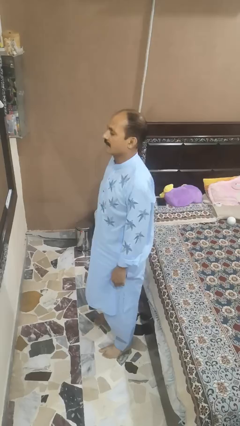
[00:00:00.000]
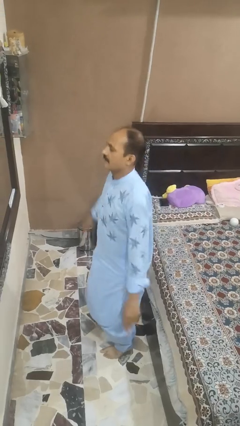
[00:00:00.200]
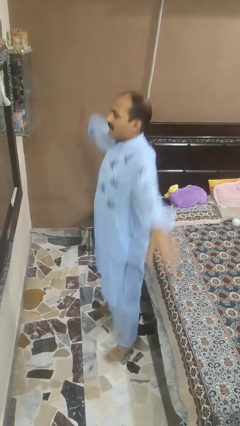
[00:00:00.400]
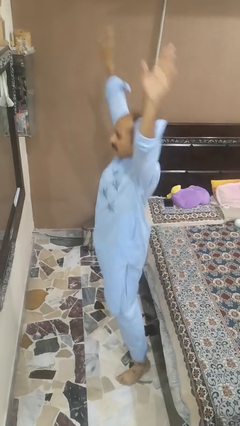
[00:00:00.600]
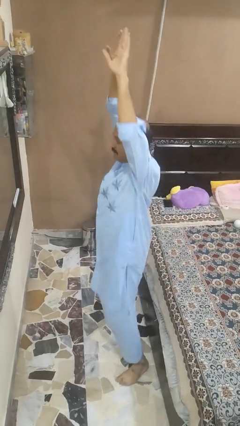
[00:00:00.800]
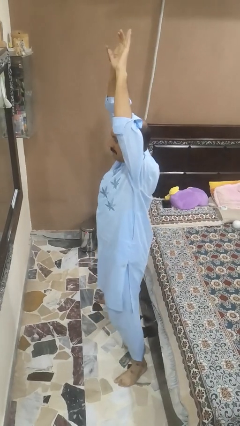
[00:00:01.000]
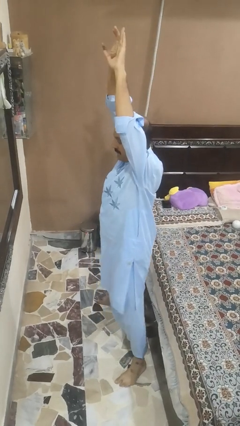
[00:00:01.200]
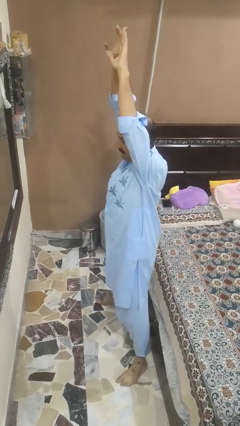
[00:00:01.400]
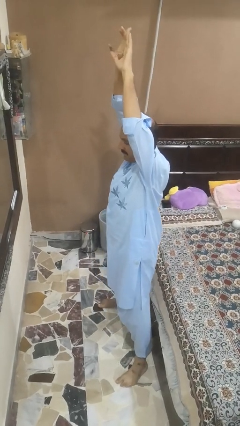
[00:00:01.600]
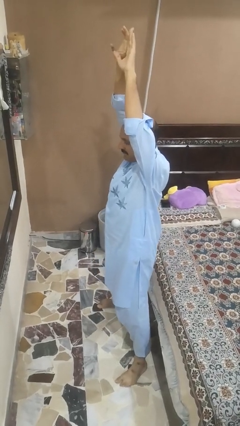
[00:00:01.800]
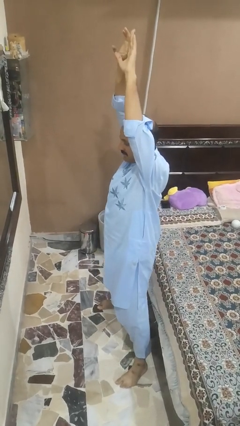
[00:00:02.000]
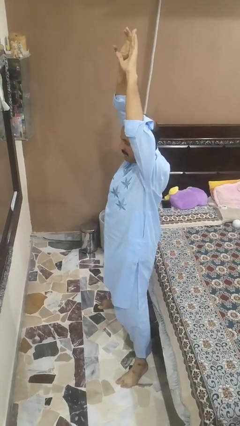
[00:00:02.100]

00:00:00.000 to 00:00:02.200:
person exercises with jumping jacks

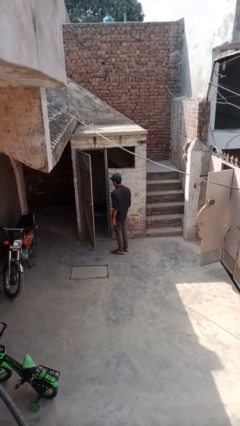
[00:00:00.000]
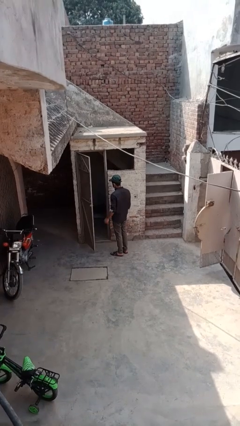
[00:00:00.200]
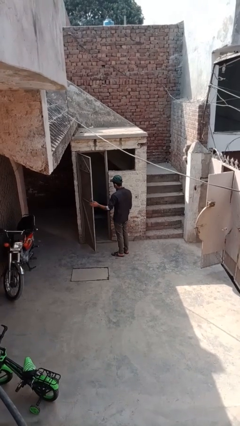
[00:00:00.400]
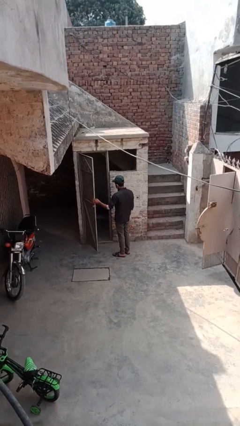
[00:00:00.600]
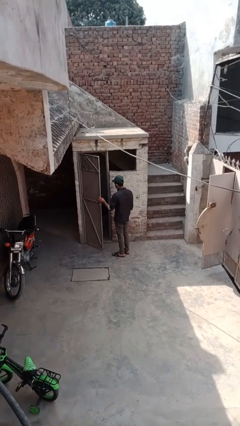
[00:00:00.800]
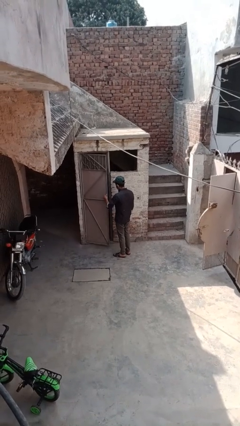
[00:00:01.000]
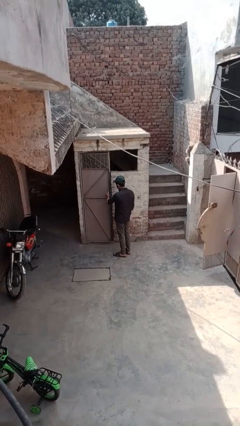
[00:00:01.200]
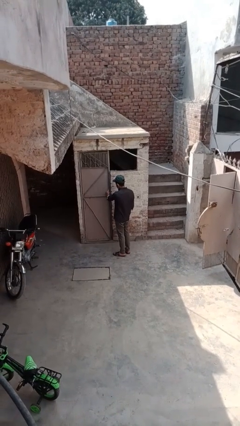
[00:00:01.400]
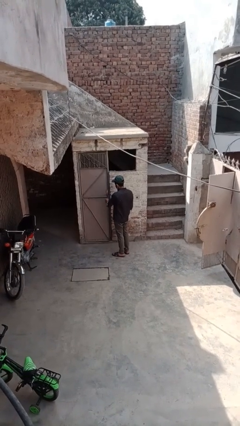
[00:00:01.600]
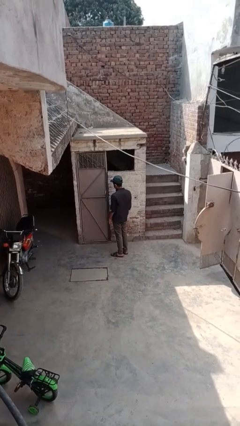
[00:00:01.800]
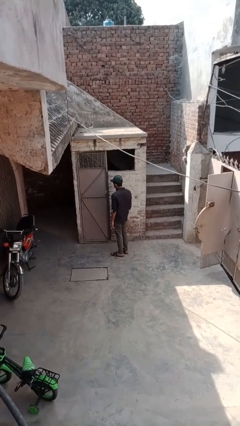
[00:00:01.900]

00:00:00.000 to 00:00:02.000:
person closes facility door

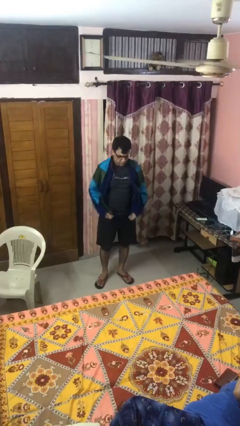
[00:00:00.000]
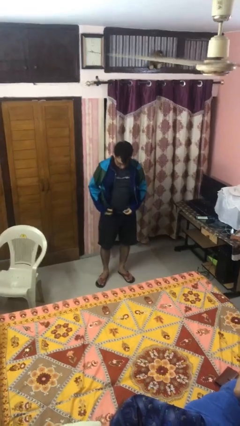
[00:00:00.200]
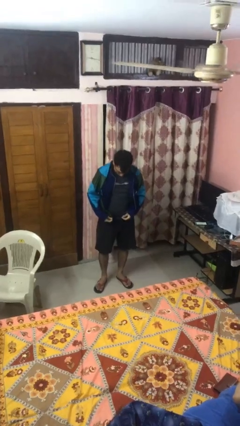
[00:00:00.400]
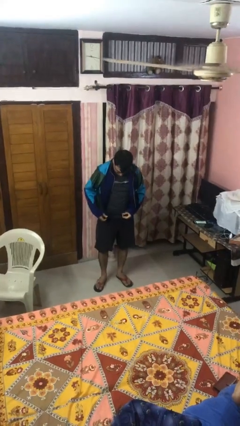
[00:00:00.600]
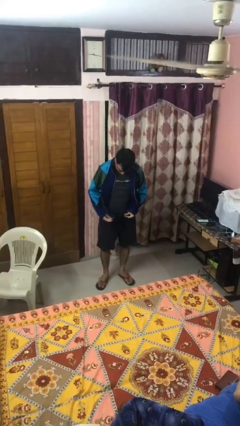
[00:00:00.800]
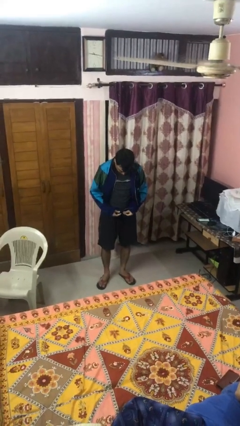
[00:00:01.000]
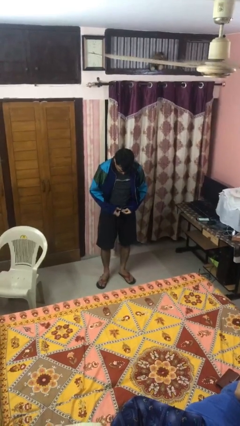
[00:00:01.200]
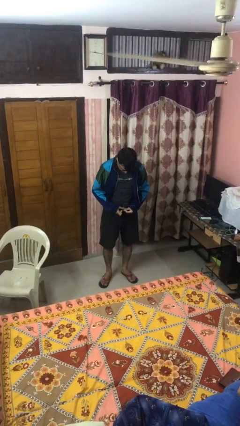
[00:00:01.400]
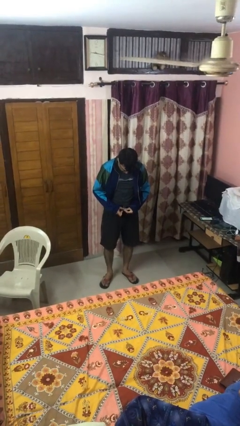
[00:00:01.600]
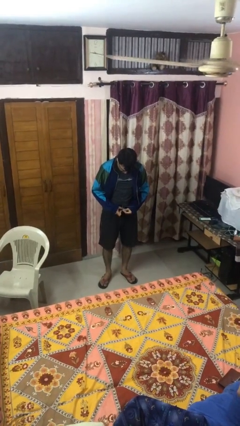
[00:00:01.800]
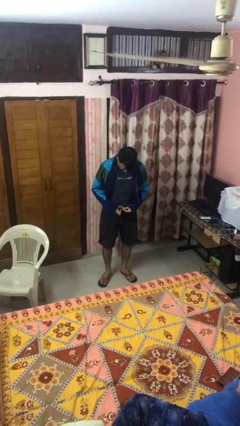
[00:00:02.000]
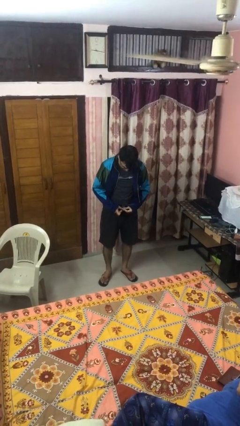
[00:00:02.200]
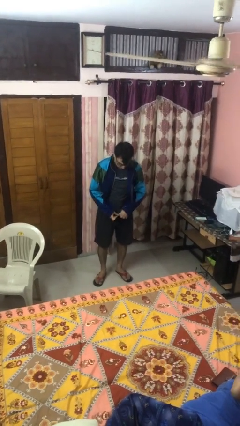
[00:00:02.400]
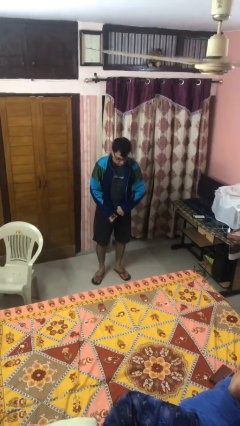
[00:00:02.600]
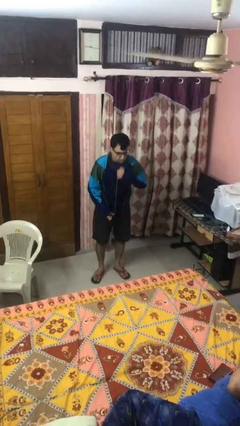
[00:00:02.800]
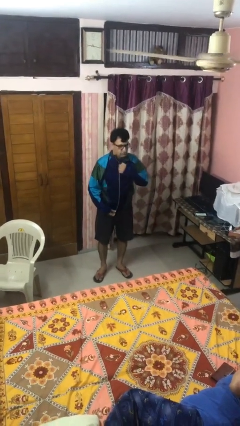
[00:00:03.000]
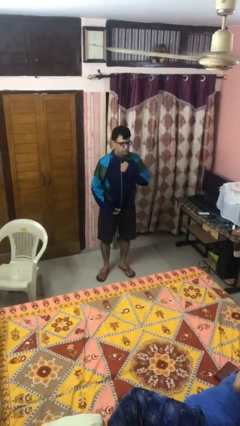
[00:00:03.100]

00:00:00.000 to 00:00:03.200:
person zips up jacket

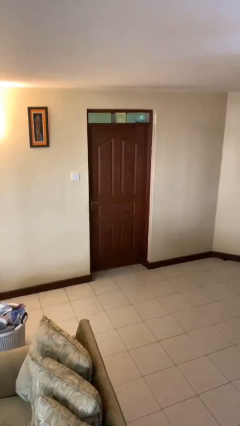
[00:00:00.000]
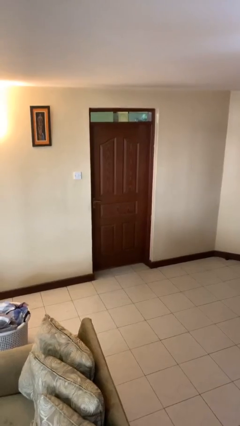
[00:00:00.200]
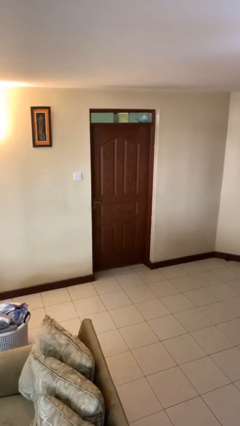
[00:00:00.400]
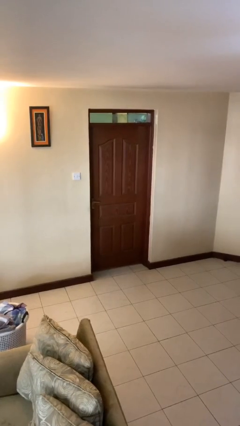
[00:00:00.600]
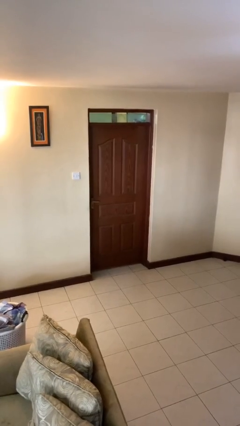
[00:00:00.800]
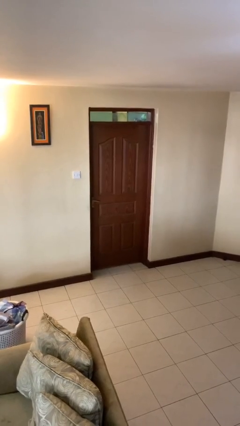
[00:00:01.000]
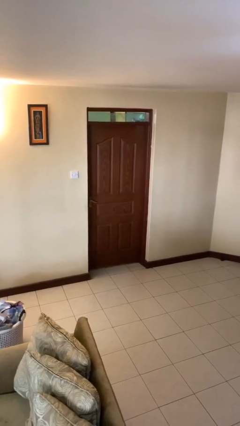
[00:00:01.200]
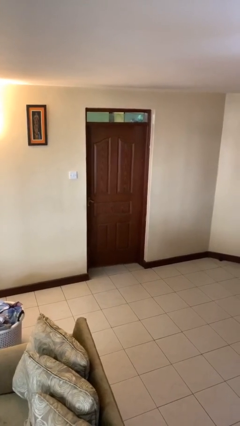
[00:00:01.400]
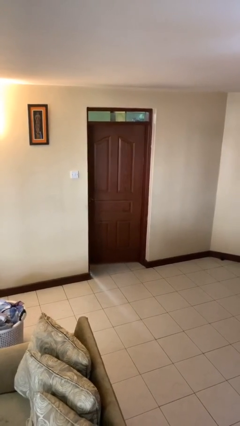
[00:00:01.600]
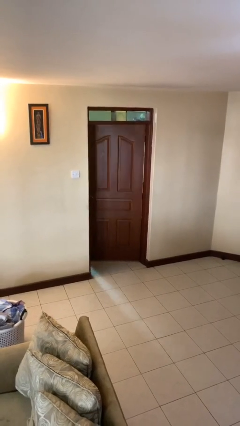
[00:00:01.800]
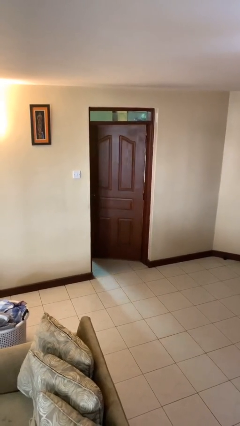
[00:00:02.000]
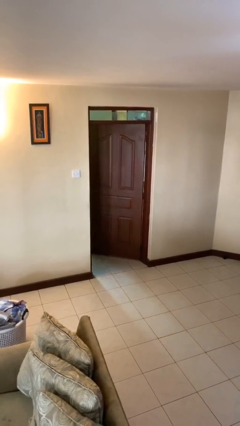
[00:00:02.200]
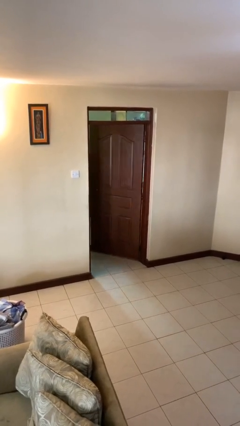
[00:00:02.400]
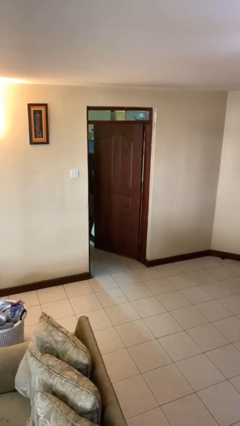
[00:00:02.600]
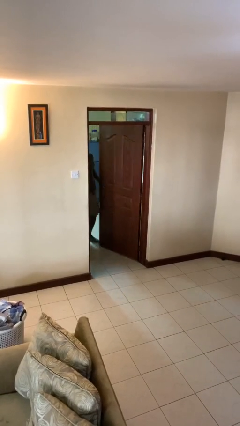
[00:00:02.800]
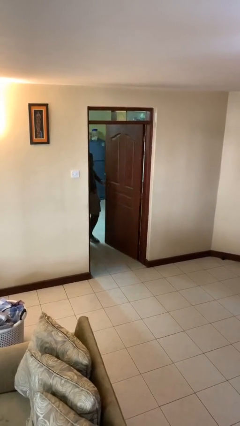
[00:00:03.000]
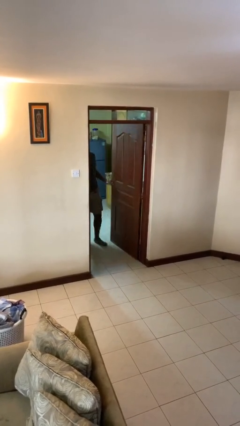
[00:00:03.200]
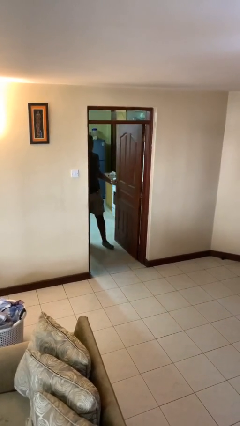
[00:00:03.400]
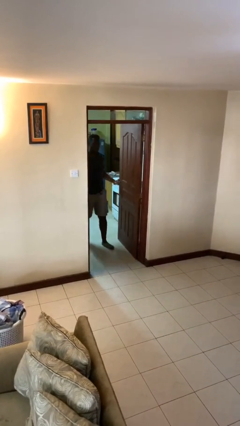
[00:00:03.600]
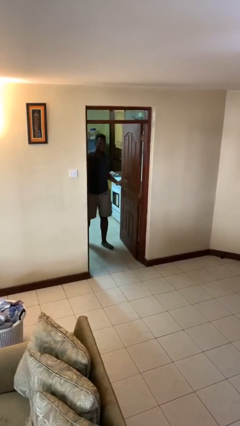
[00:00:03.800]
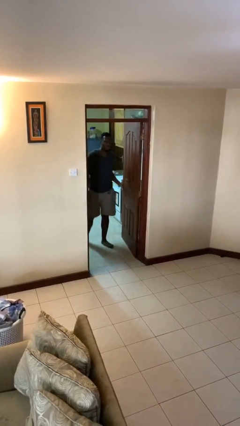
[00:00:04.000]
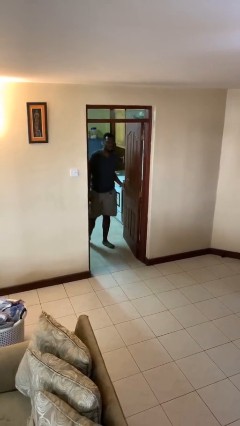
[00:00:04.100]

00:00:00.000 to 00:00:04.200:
person opens facility door

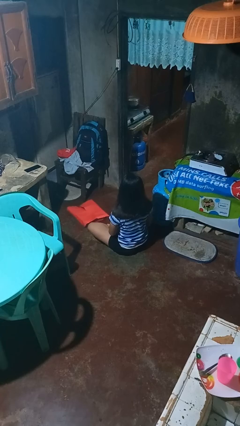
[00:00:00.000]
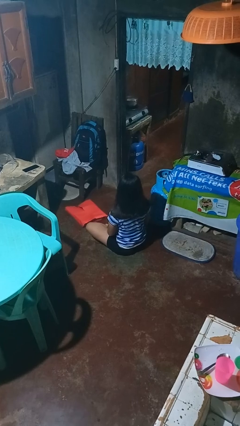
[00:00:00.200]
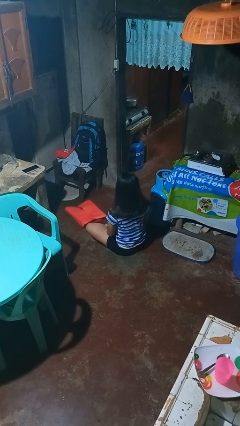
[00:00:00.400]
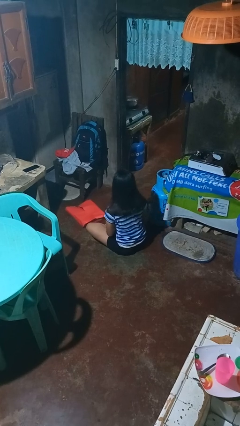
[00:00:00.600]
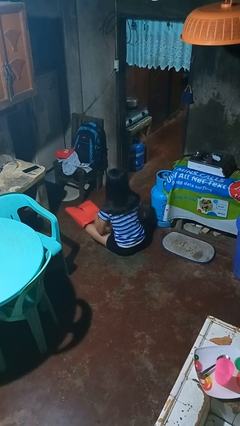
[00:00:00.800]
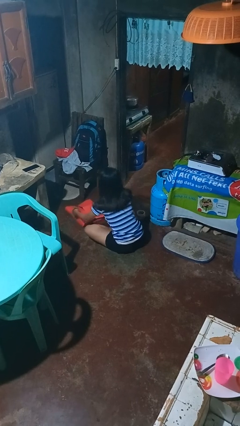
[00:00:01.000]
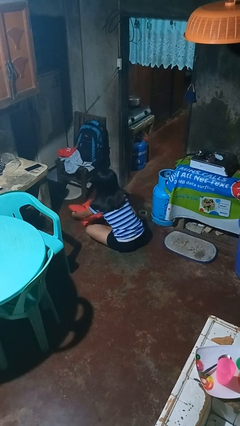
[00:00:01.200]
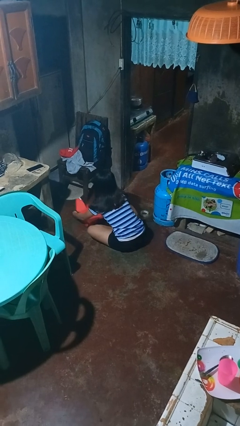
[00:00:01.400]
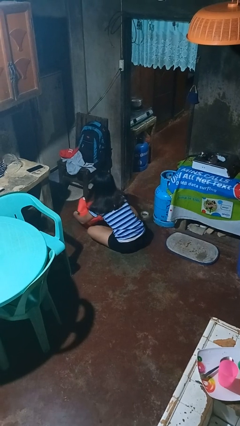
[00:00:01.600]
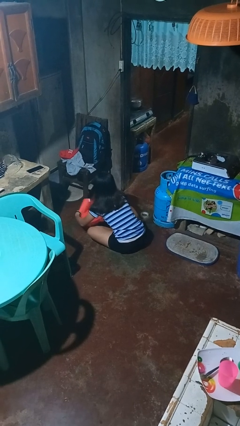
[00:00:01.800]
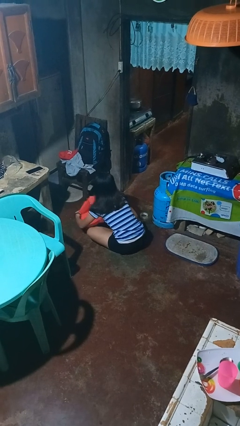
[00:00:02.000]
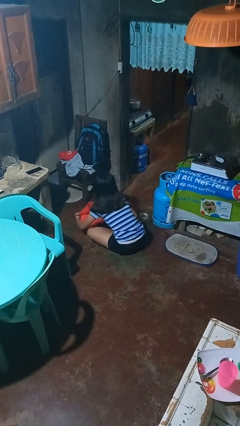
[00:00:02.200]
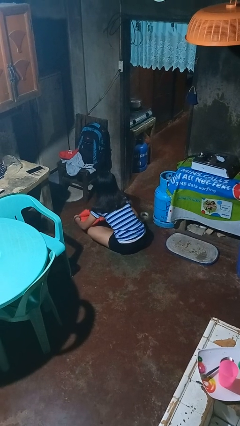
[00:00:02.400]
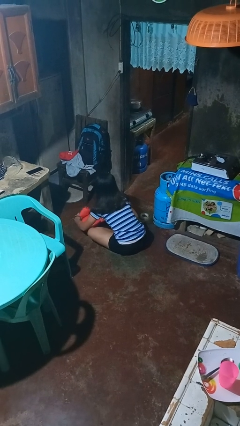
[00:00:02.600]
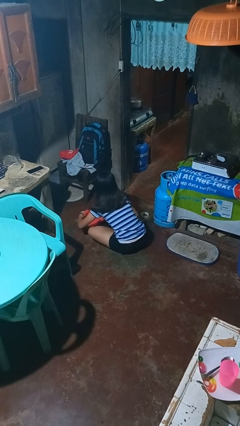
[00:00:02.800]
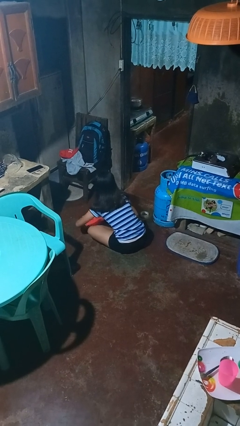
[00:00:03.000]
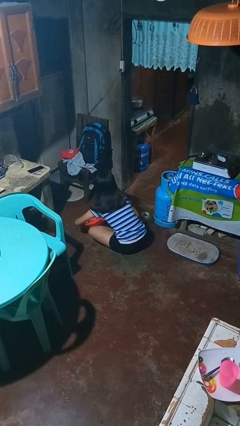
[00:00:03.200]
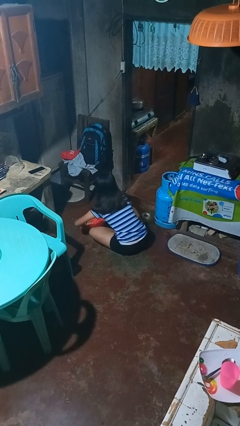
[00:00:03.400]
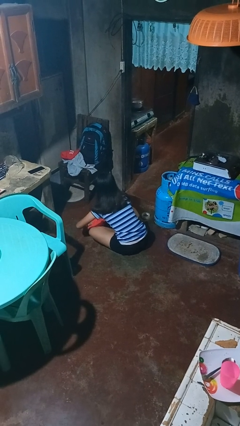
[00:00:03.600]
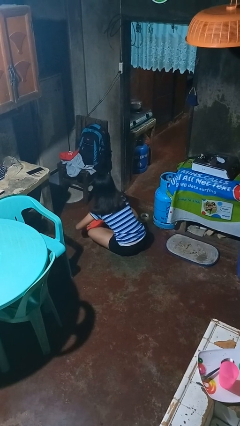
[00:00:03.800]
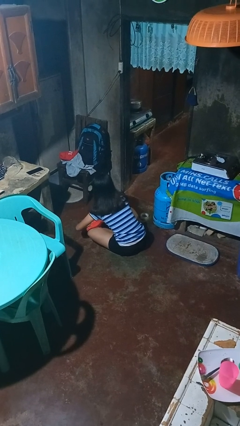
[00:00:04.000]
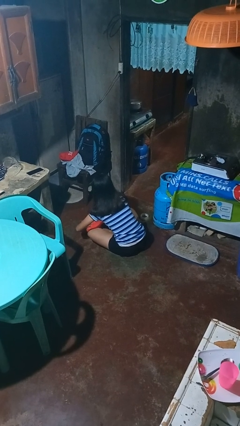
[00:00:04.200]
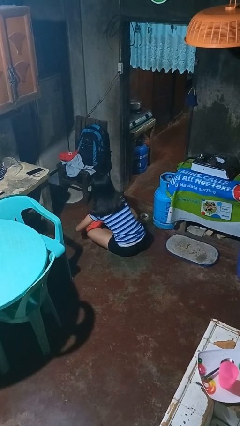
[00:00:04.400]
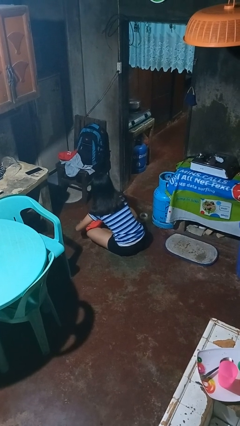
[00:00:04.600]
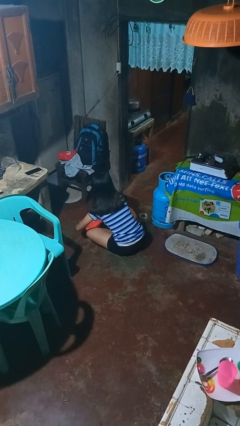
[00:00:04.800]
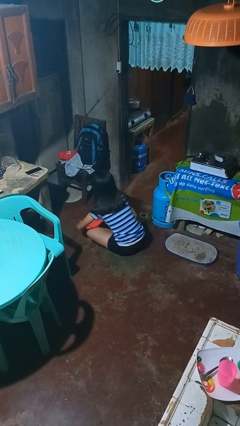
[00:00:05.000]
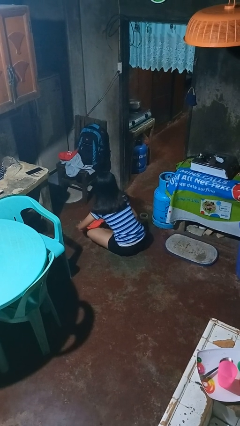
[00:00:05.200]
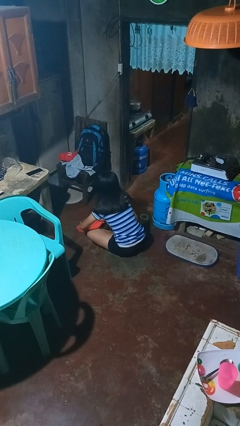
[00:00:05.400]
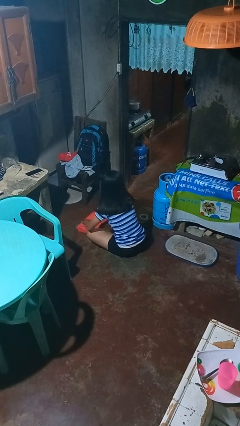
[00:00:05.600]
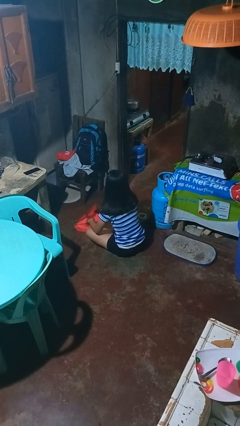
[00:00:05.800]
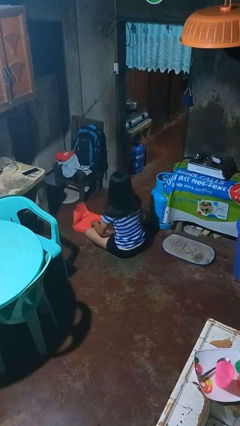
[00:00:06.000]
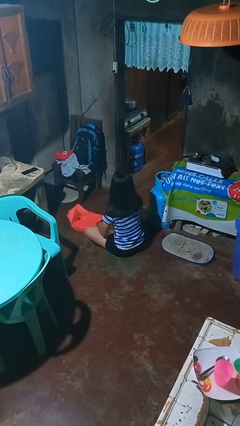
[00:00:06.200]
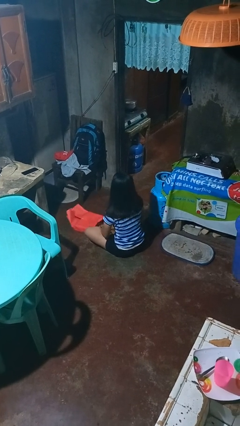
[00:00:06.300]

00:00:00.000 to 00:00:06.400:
person wraps box
